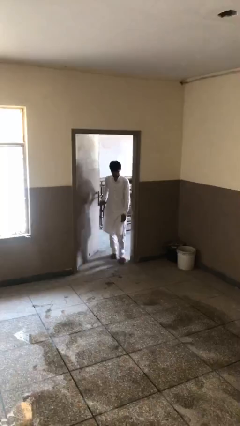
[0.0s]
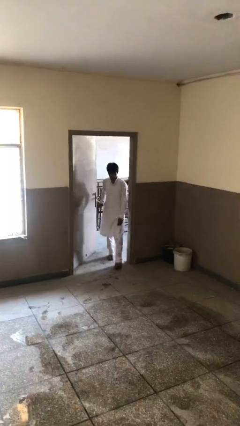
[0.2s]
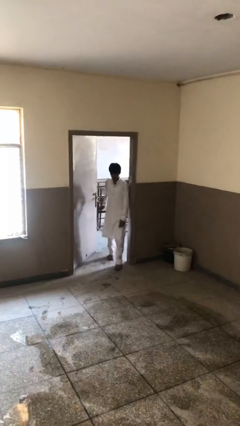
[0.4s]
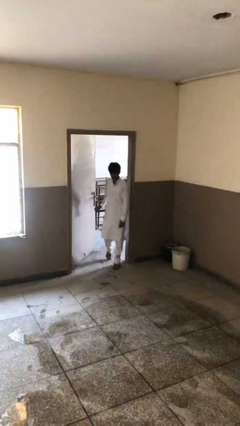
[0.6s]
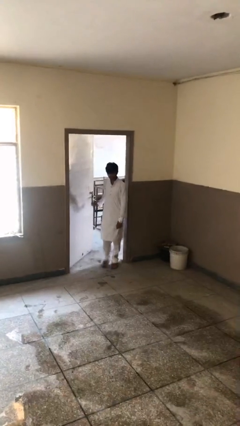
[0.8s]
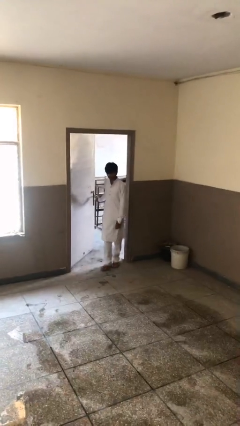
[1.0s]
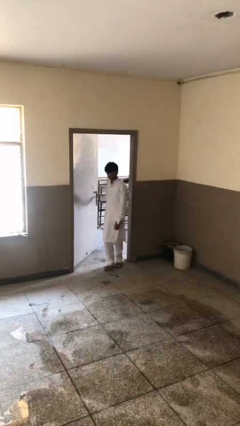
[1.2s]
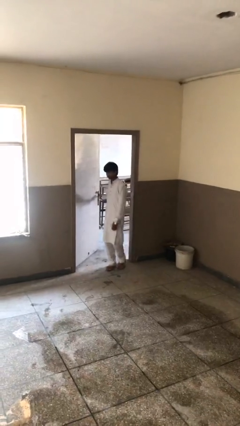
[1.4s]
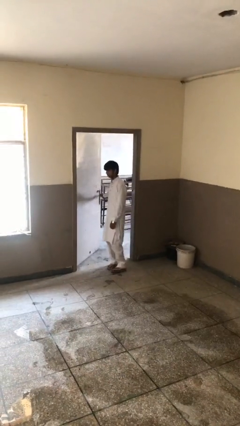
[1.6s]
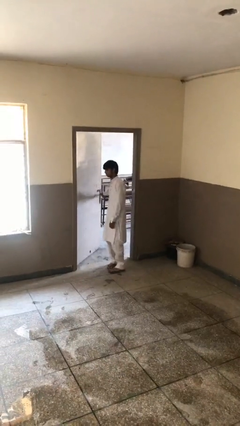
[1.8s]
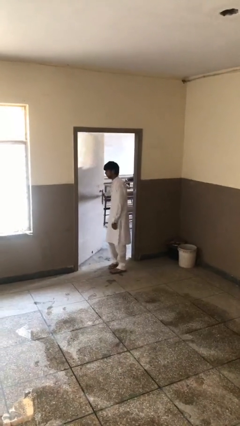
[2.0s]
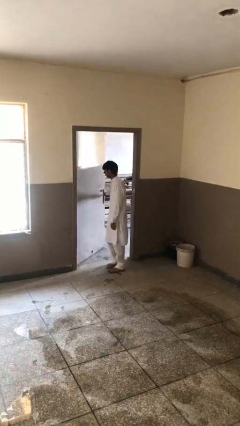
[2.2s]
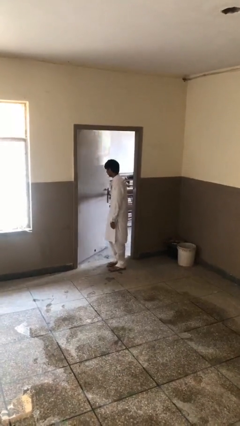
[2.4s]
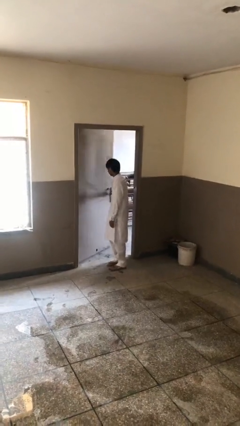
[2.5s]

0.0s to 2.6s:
person enters scene through structure

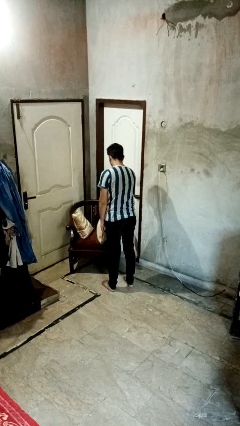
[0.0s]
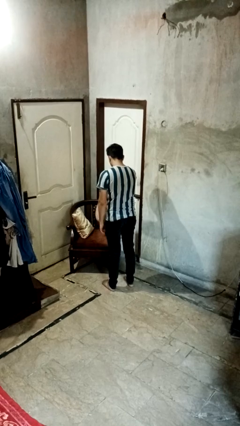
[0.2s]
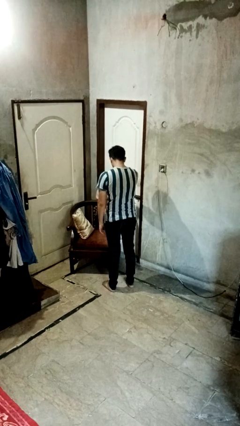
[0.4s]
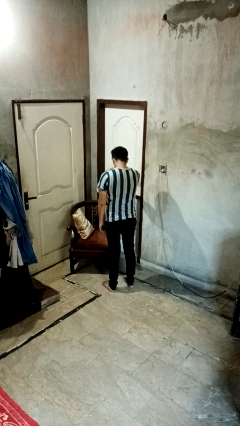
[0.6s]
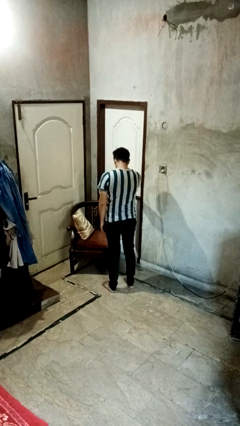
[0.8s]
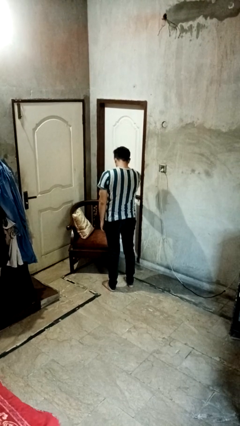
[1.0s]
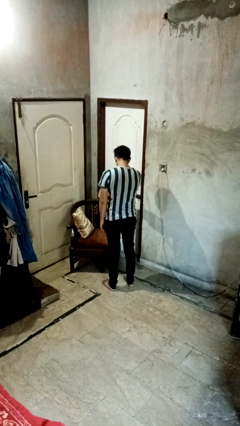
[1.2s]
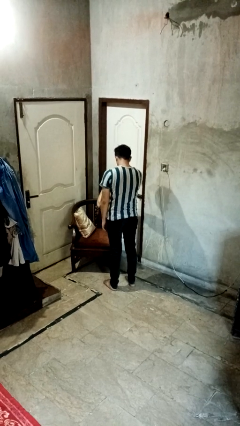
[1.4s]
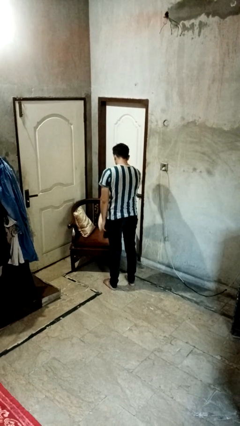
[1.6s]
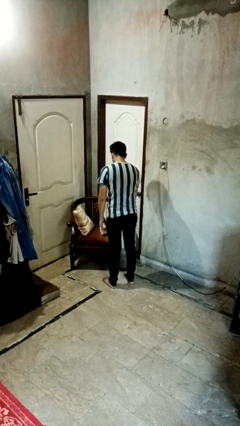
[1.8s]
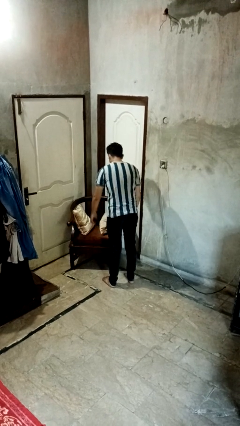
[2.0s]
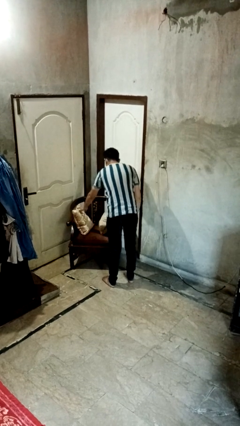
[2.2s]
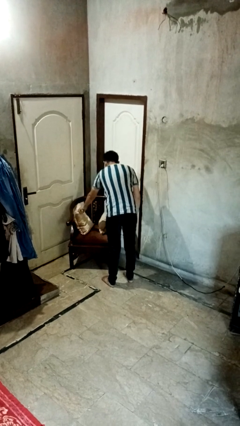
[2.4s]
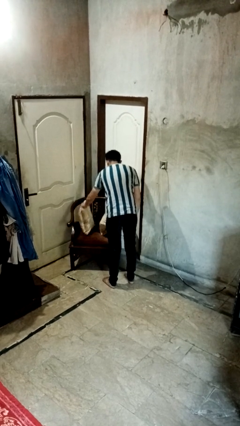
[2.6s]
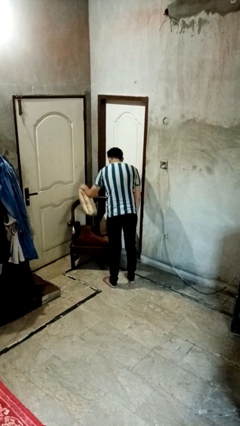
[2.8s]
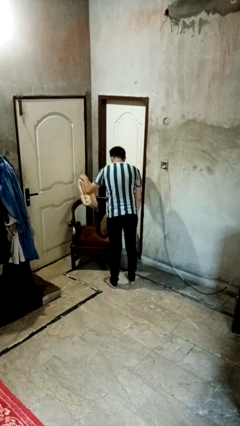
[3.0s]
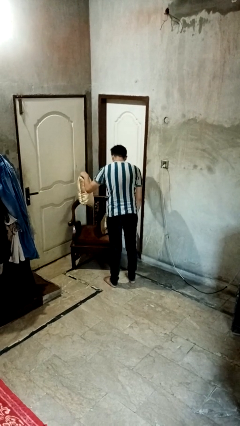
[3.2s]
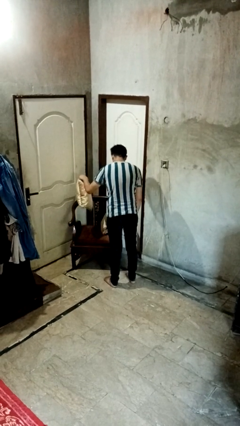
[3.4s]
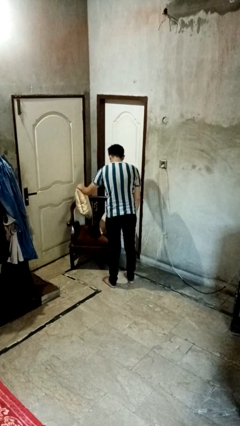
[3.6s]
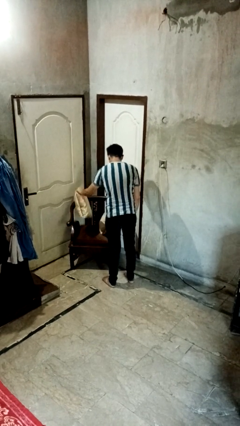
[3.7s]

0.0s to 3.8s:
person searches in couch

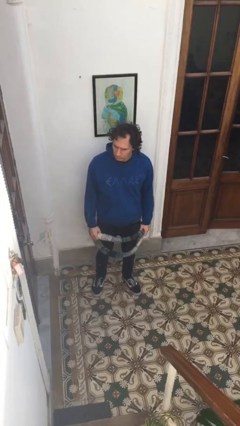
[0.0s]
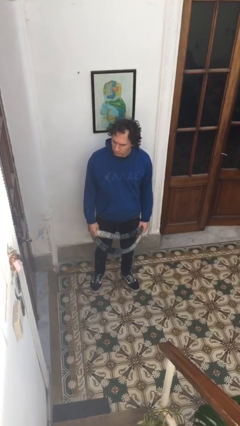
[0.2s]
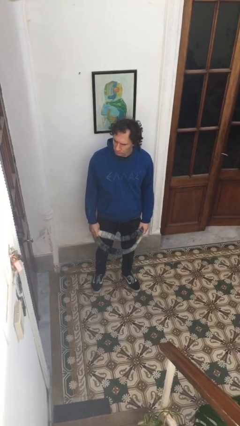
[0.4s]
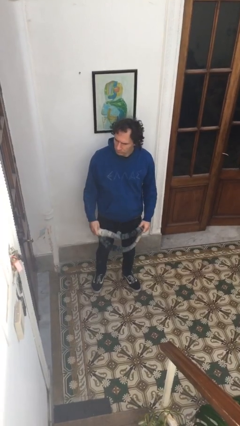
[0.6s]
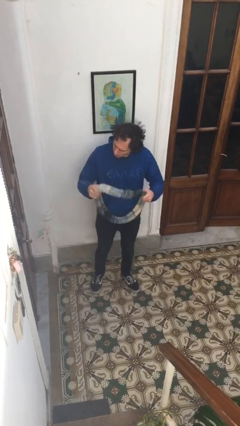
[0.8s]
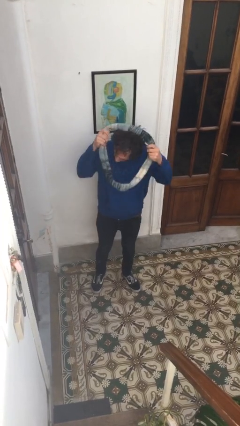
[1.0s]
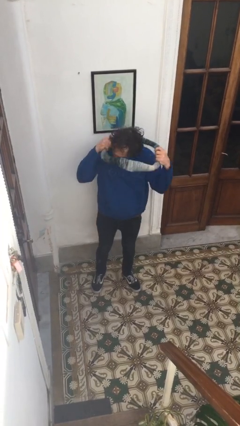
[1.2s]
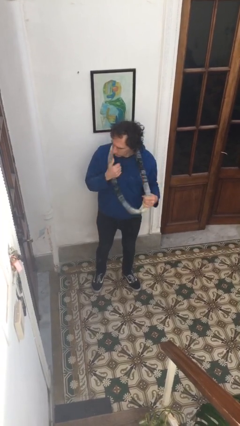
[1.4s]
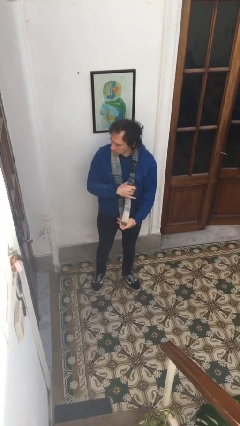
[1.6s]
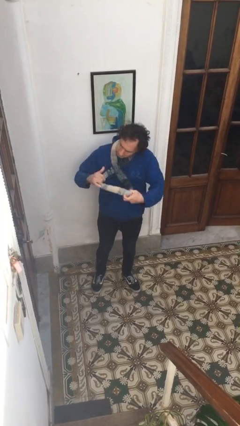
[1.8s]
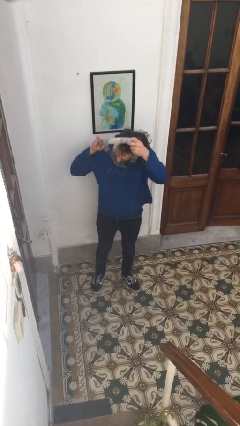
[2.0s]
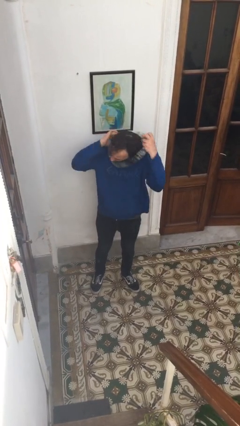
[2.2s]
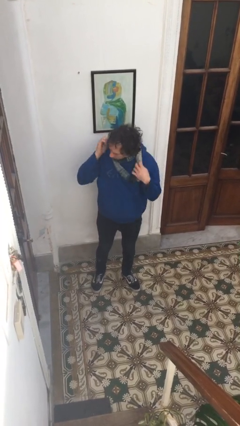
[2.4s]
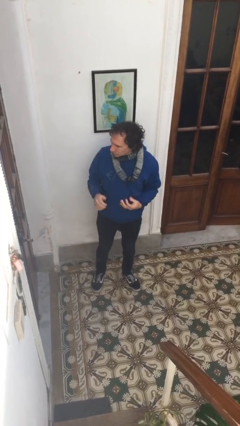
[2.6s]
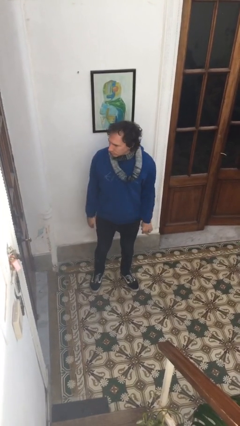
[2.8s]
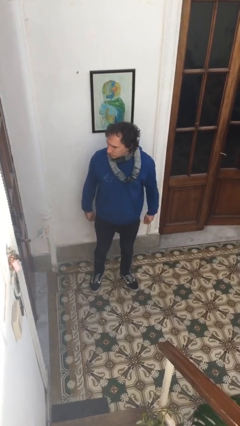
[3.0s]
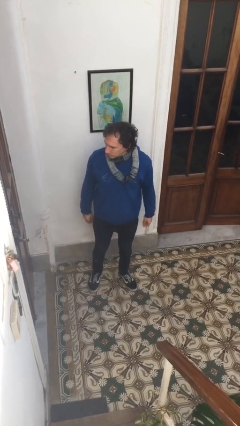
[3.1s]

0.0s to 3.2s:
person puts on scarf

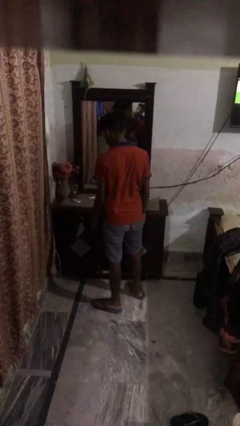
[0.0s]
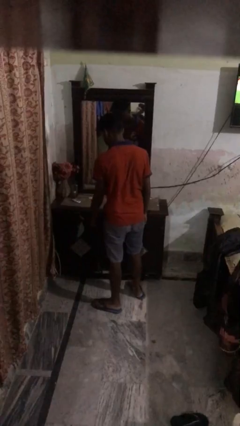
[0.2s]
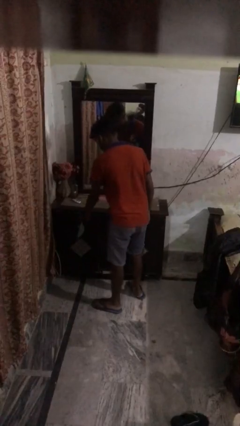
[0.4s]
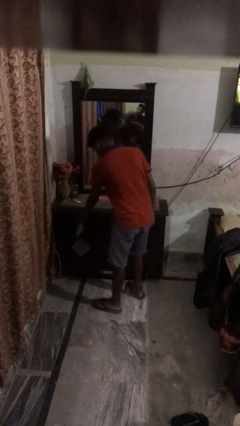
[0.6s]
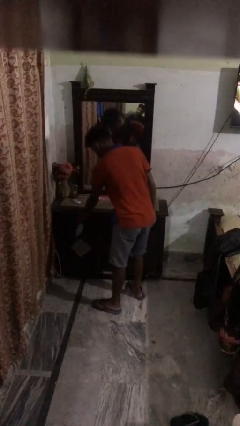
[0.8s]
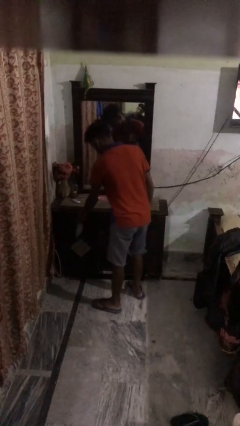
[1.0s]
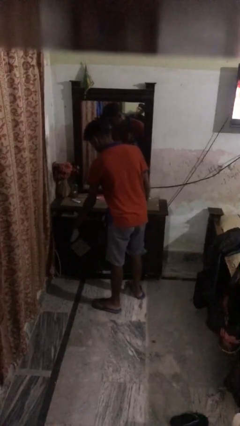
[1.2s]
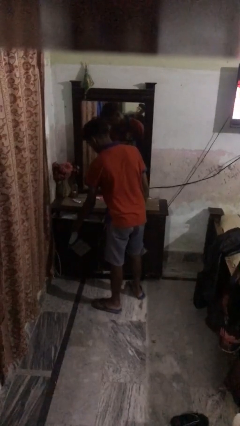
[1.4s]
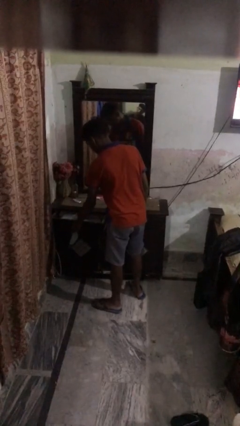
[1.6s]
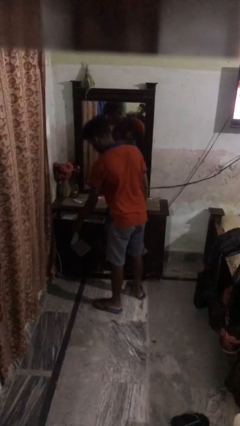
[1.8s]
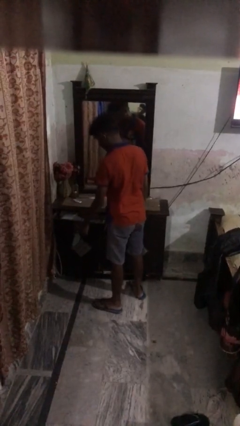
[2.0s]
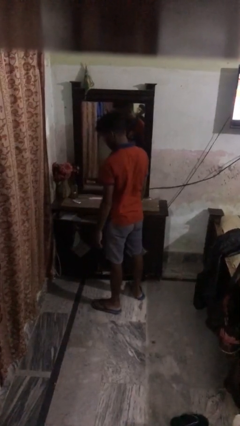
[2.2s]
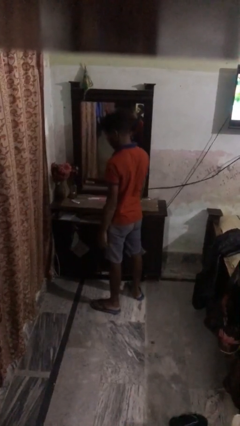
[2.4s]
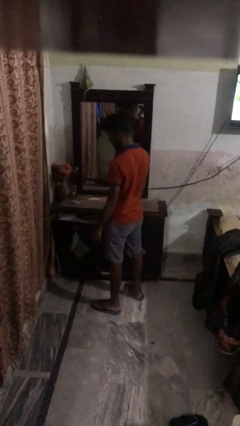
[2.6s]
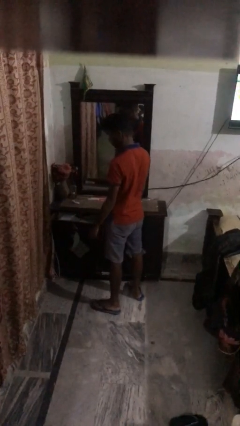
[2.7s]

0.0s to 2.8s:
person opens dresser drawer

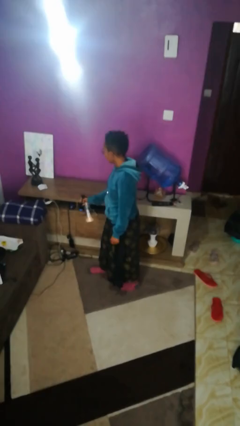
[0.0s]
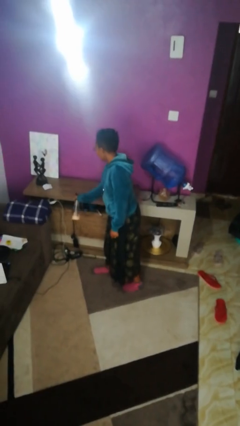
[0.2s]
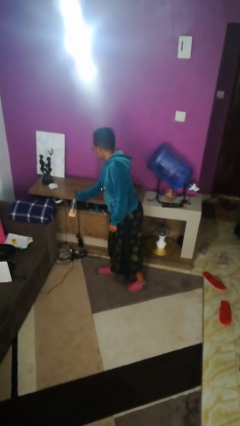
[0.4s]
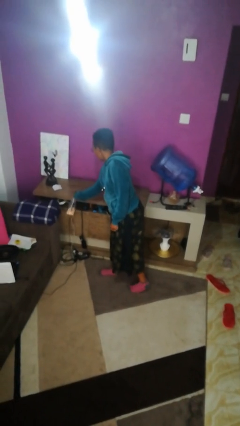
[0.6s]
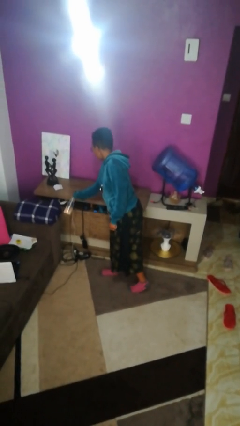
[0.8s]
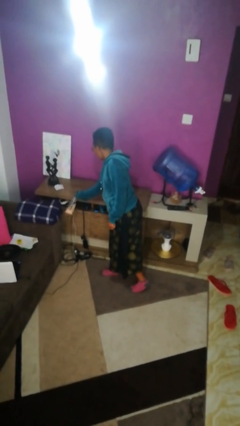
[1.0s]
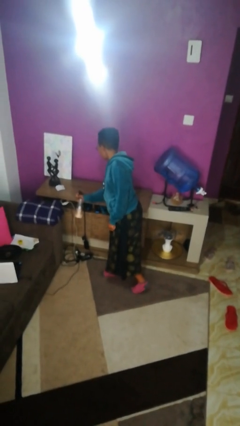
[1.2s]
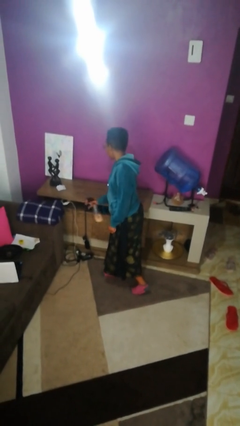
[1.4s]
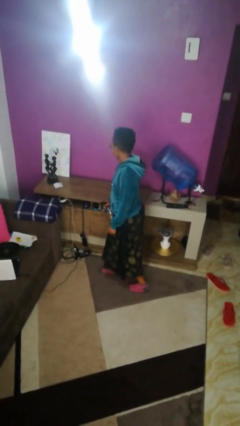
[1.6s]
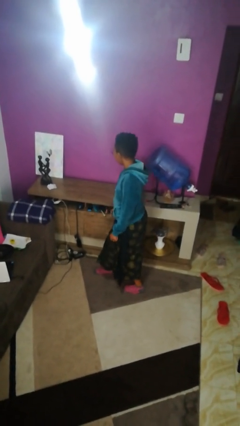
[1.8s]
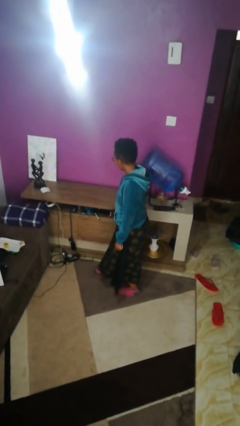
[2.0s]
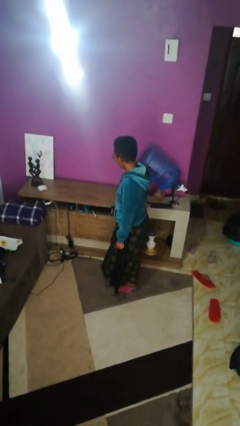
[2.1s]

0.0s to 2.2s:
person sprays from bottle

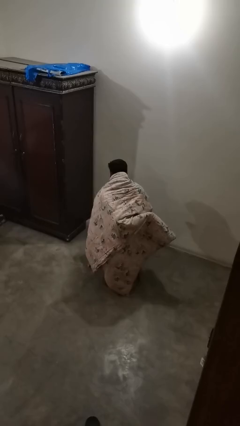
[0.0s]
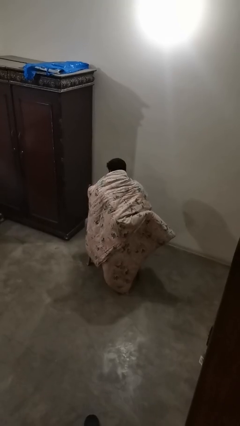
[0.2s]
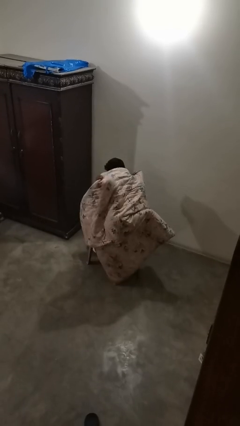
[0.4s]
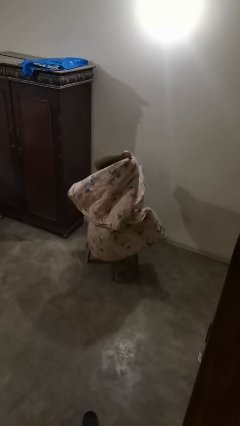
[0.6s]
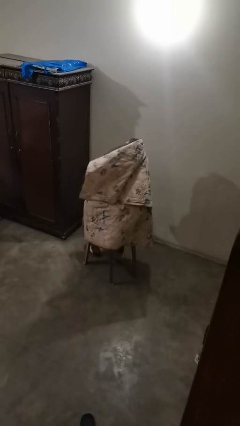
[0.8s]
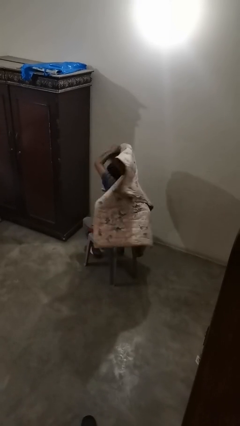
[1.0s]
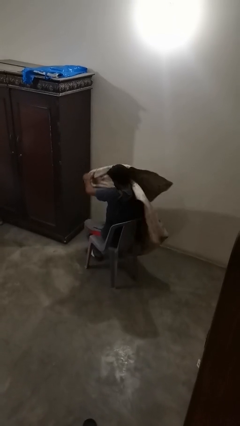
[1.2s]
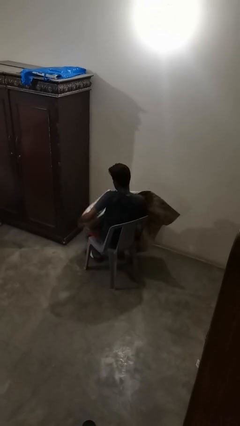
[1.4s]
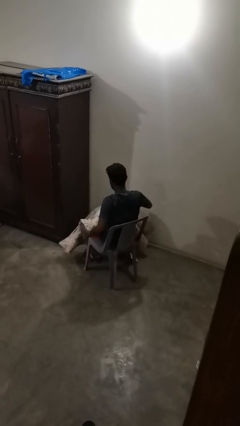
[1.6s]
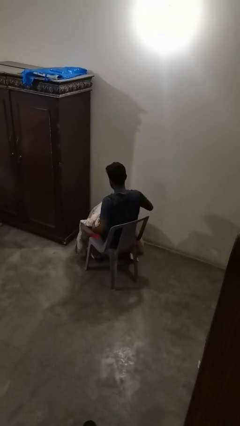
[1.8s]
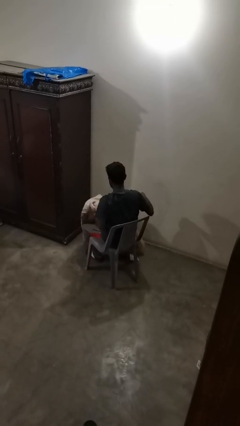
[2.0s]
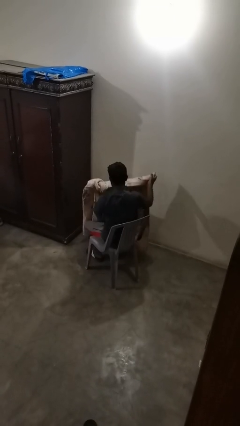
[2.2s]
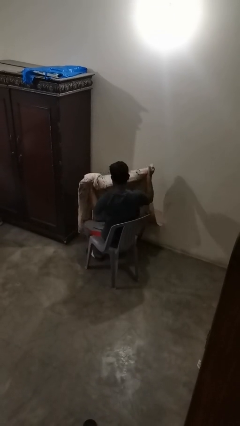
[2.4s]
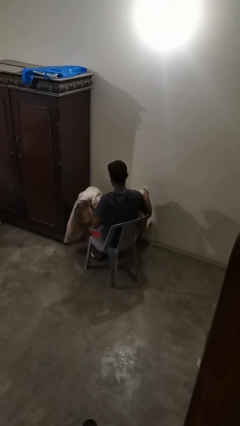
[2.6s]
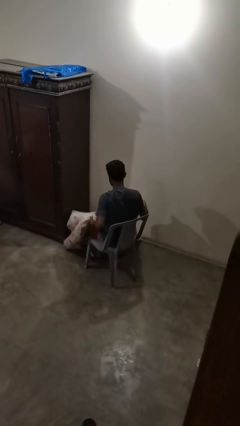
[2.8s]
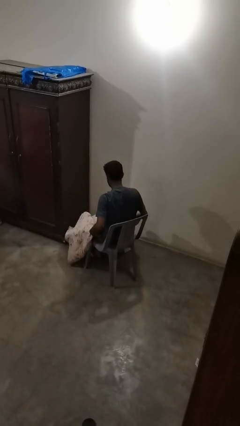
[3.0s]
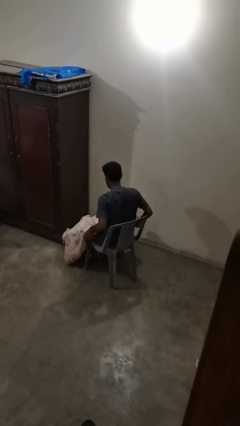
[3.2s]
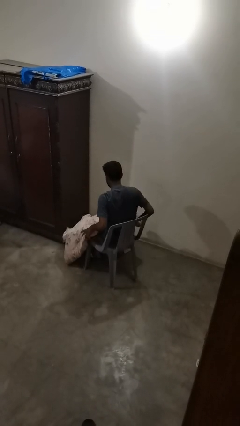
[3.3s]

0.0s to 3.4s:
person uncovers with blanket
